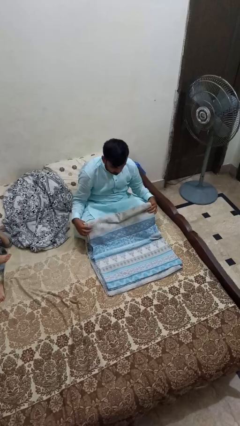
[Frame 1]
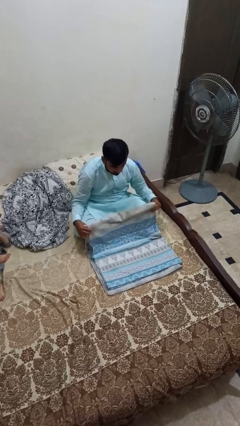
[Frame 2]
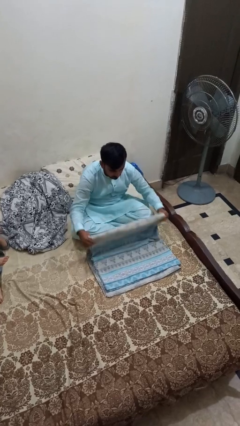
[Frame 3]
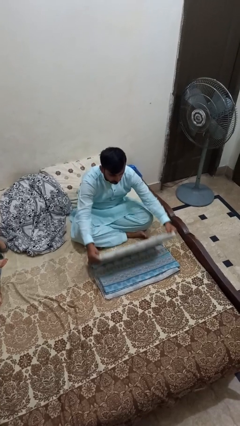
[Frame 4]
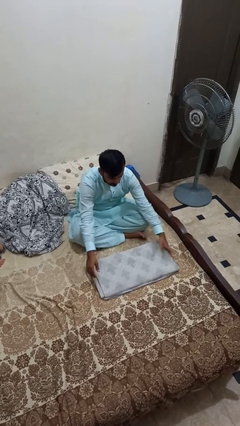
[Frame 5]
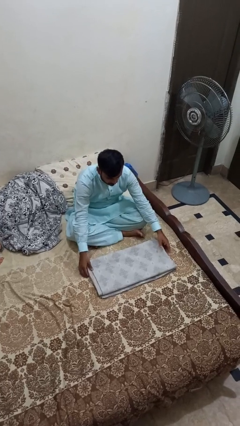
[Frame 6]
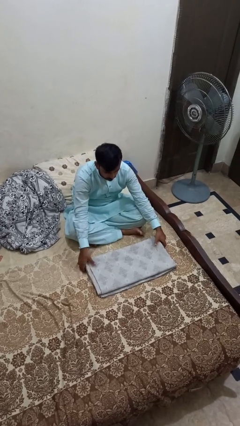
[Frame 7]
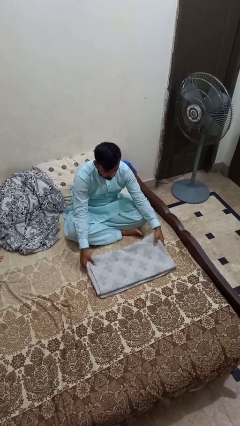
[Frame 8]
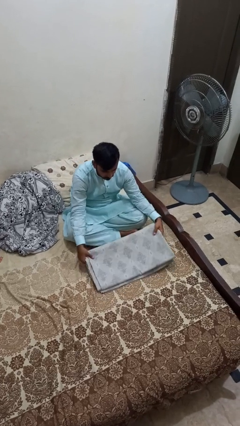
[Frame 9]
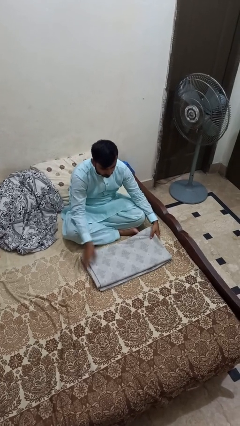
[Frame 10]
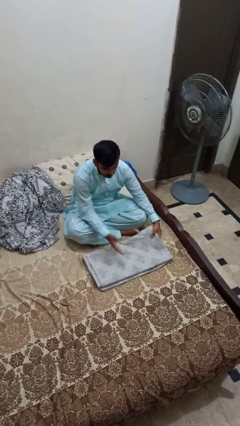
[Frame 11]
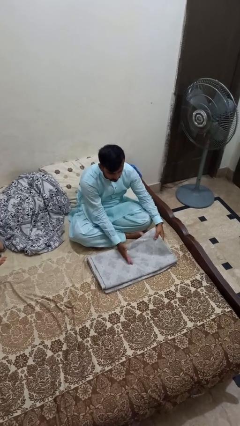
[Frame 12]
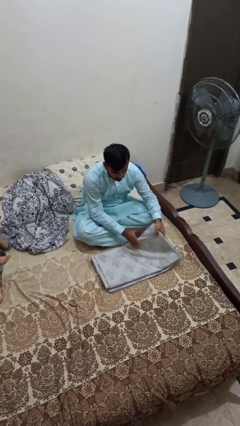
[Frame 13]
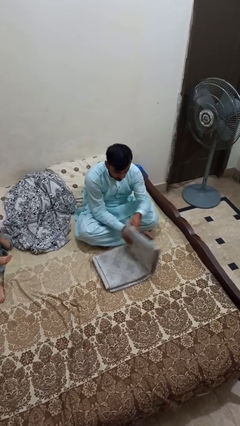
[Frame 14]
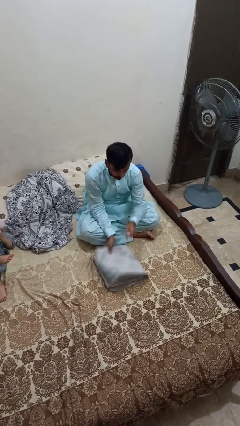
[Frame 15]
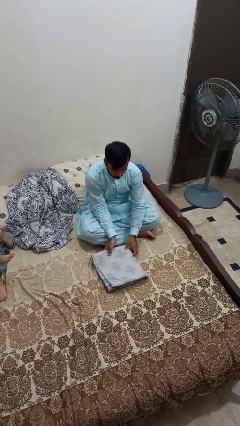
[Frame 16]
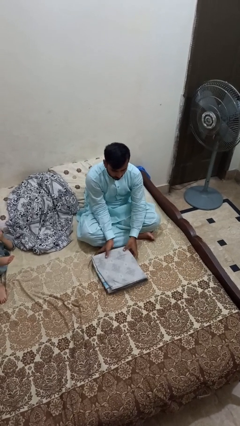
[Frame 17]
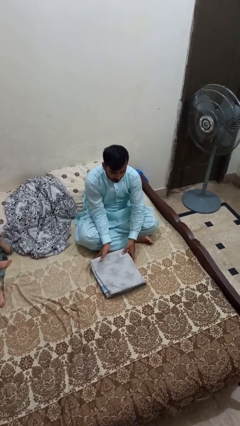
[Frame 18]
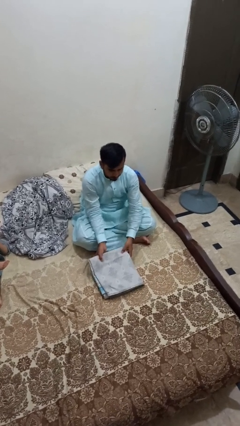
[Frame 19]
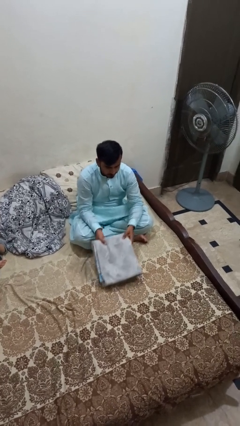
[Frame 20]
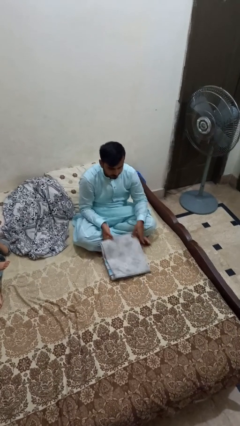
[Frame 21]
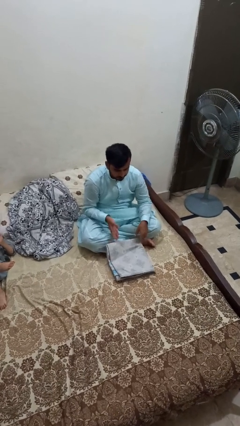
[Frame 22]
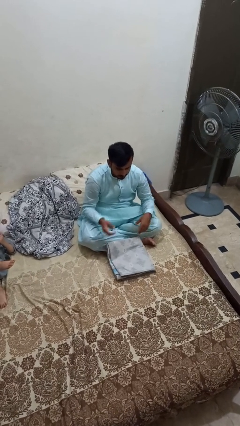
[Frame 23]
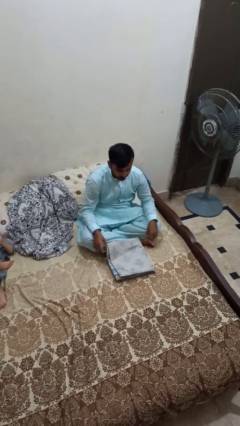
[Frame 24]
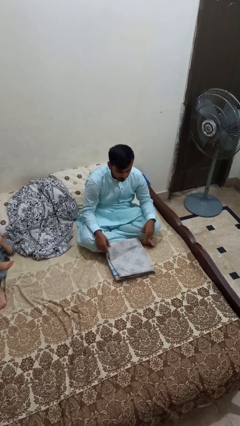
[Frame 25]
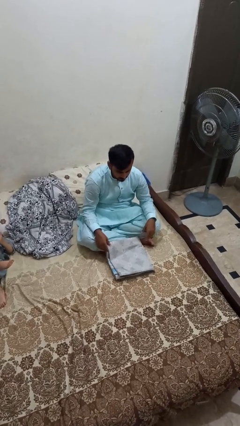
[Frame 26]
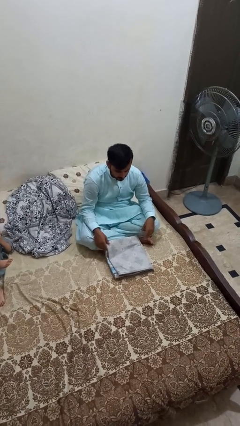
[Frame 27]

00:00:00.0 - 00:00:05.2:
person folds blanket

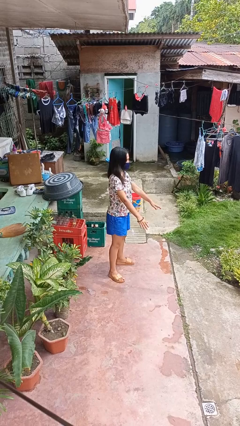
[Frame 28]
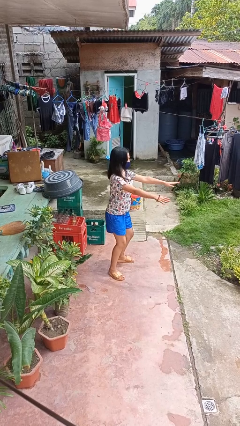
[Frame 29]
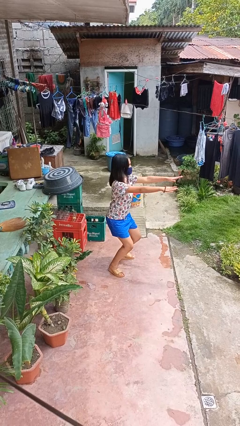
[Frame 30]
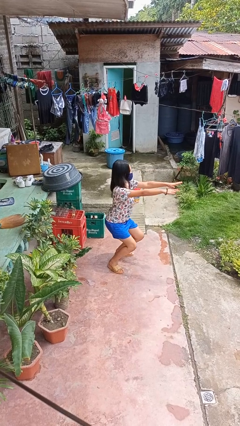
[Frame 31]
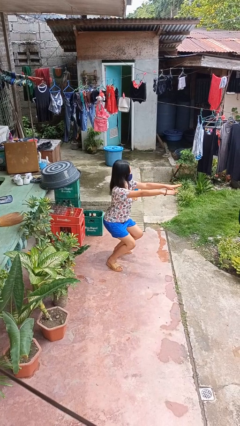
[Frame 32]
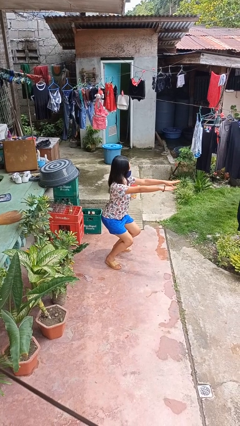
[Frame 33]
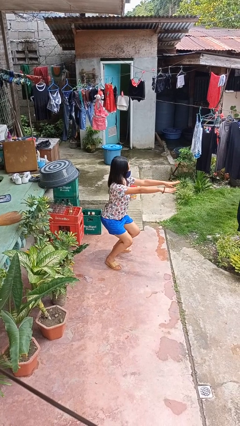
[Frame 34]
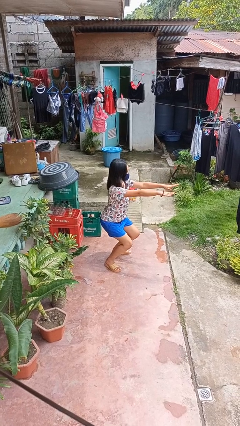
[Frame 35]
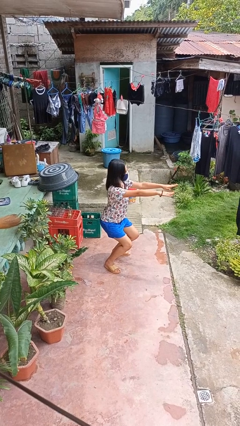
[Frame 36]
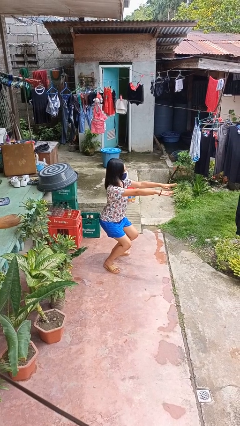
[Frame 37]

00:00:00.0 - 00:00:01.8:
person squats

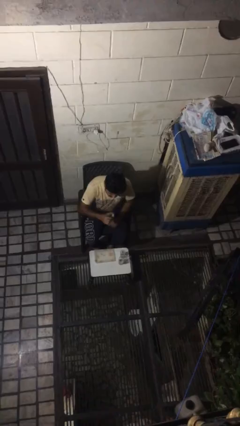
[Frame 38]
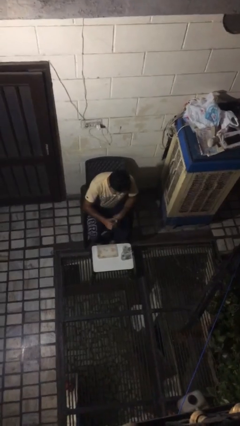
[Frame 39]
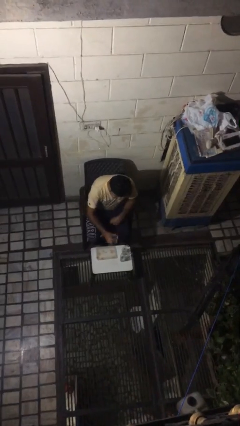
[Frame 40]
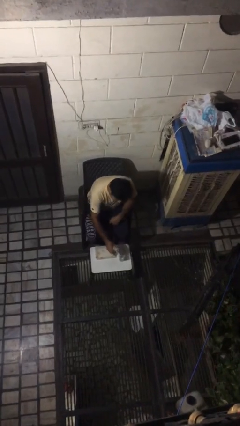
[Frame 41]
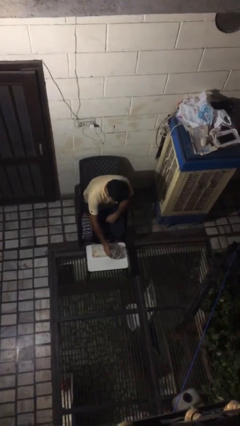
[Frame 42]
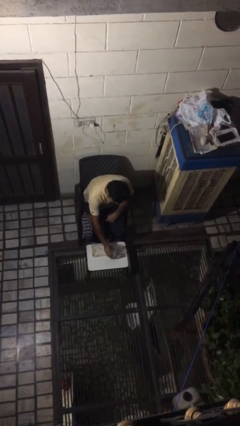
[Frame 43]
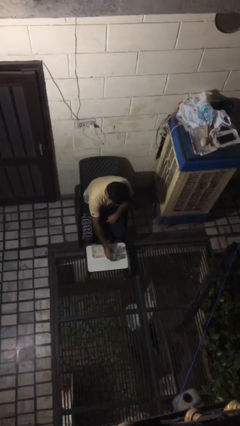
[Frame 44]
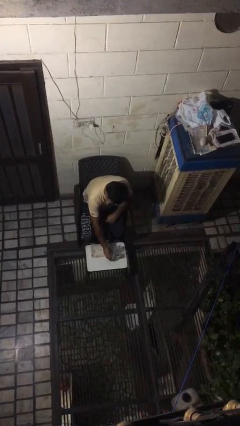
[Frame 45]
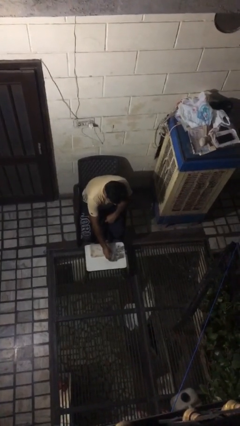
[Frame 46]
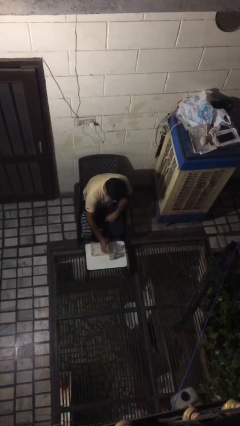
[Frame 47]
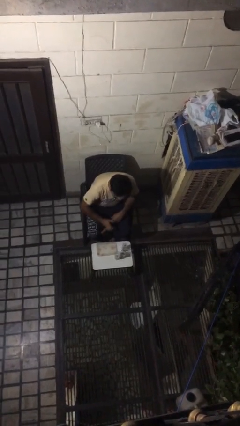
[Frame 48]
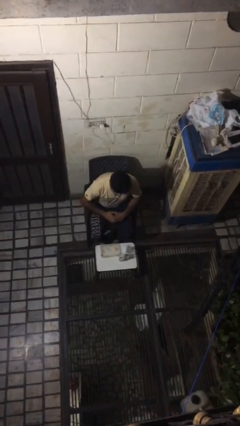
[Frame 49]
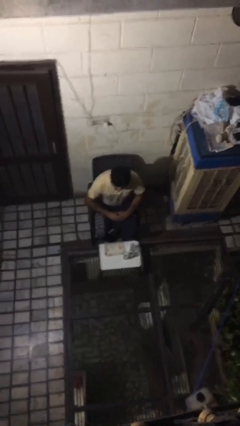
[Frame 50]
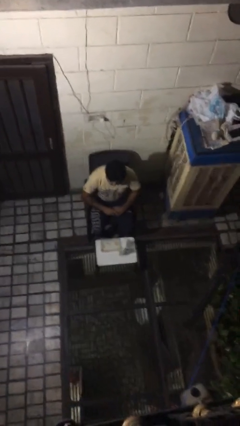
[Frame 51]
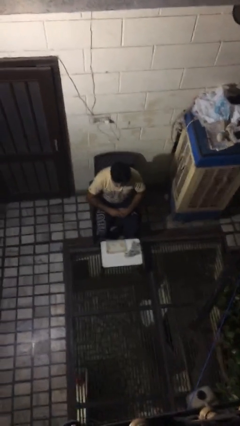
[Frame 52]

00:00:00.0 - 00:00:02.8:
person puts down object on table

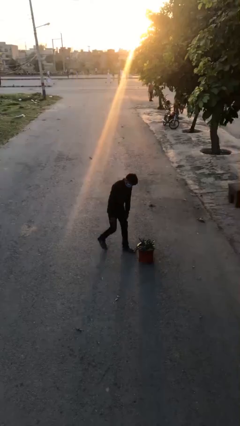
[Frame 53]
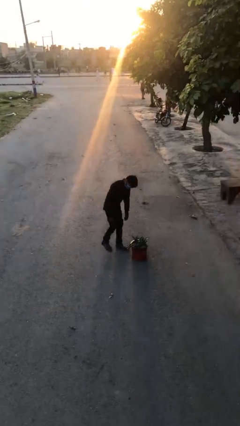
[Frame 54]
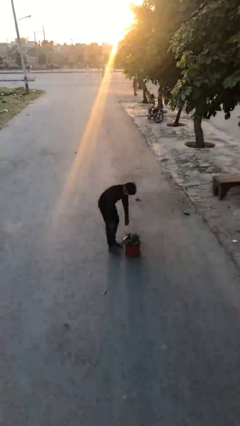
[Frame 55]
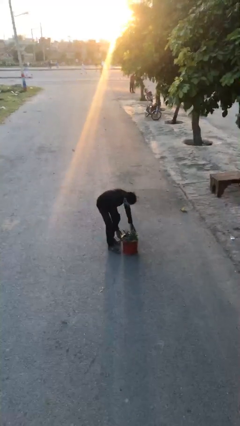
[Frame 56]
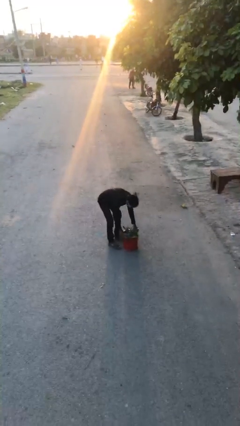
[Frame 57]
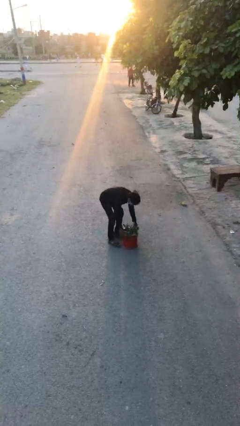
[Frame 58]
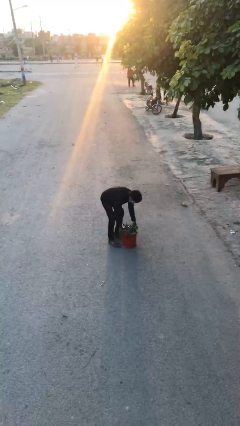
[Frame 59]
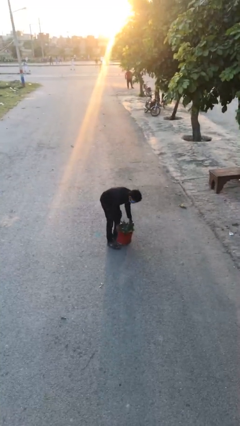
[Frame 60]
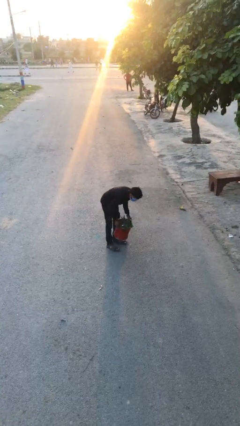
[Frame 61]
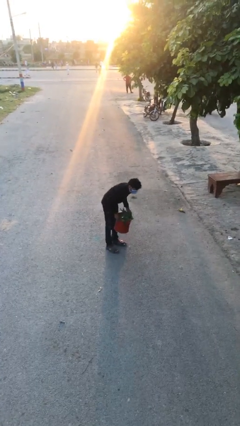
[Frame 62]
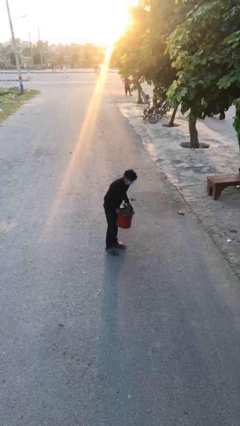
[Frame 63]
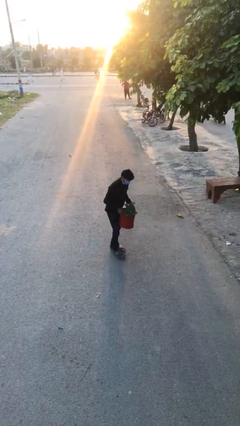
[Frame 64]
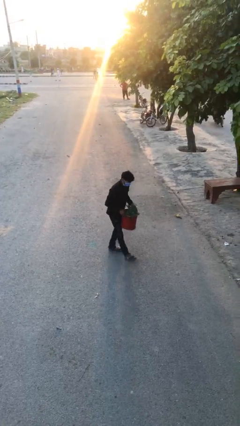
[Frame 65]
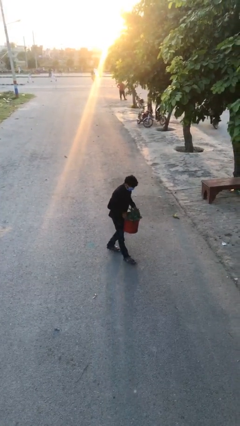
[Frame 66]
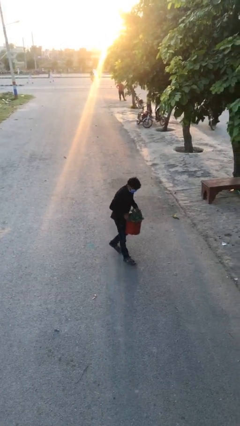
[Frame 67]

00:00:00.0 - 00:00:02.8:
person picks up object from floor

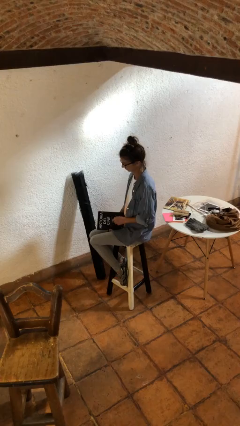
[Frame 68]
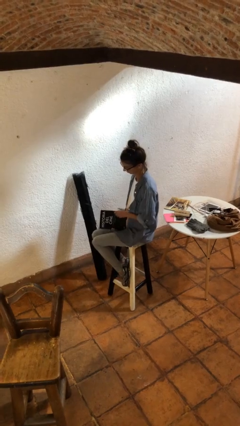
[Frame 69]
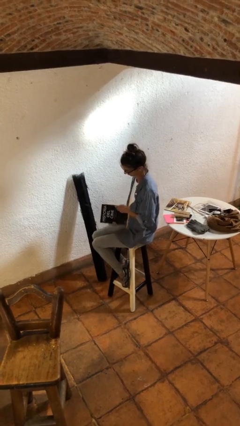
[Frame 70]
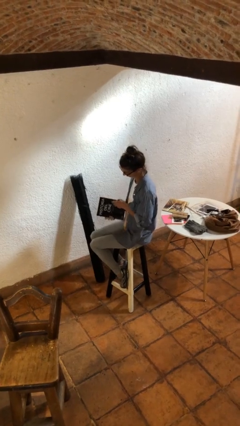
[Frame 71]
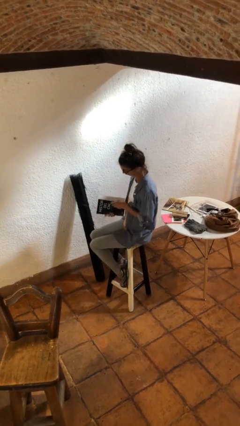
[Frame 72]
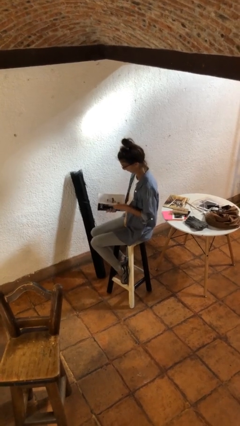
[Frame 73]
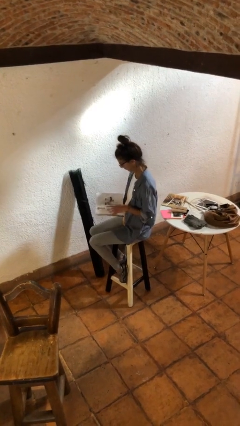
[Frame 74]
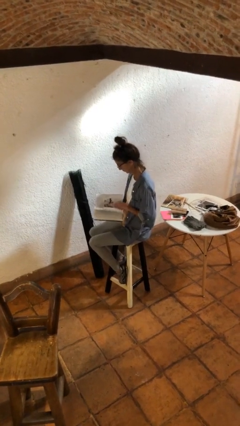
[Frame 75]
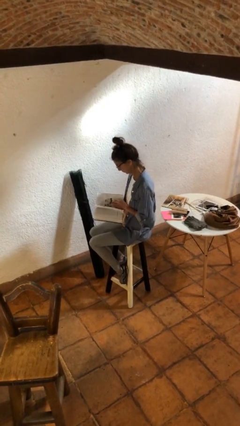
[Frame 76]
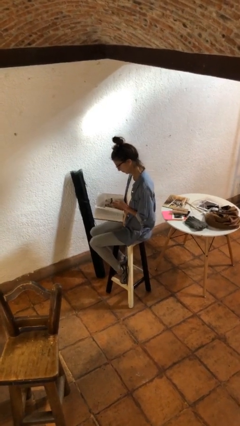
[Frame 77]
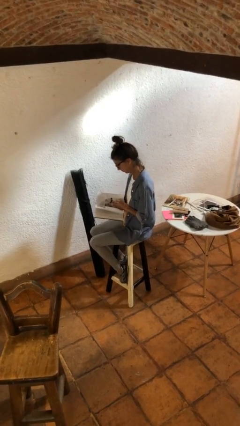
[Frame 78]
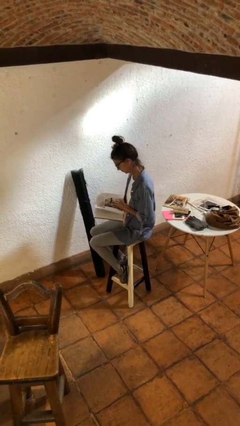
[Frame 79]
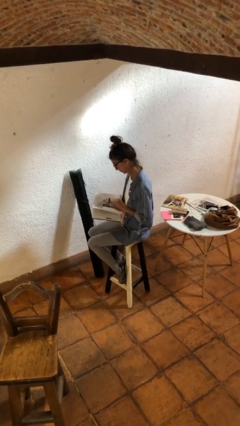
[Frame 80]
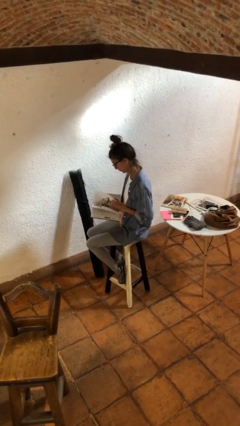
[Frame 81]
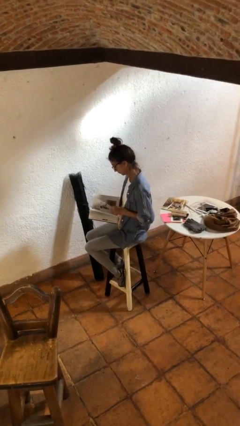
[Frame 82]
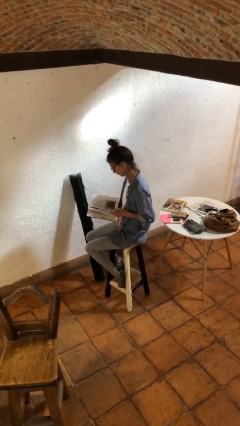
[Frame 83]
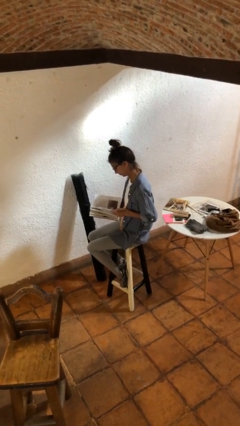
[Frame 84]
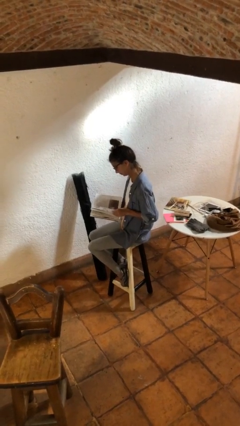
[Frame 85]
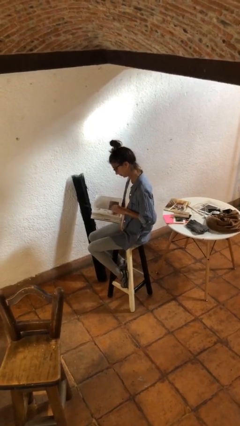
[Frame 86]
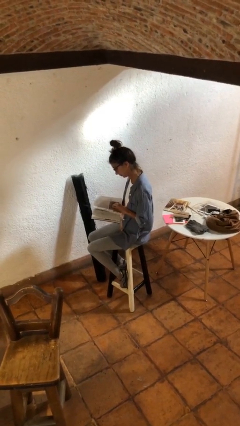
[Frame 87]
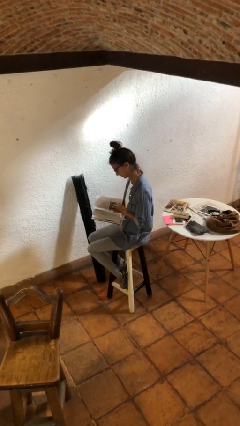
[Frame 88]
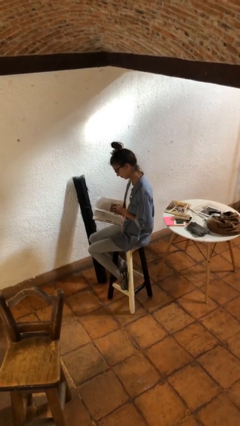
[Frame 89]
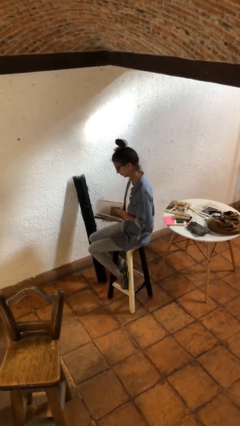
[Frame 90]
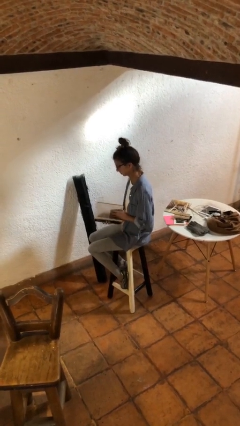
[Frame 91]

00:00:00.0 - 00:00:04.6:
person reads book

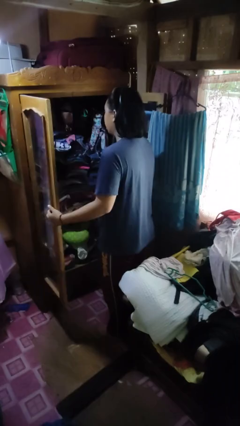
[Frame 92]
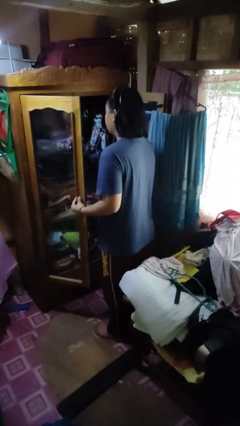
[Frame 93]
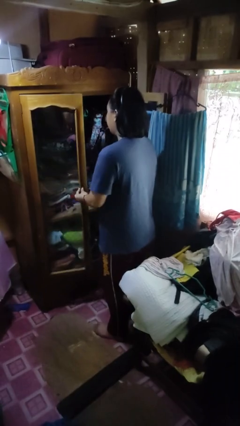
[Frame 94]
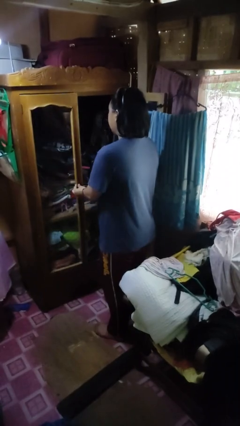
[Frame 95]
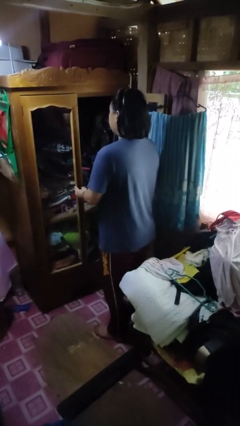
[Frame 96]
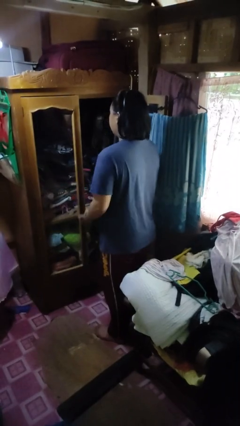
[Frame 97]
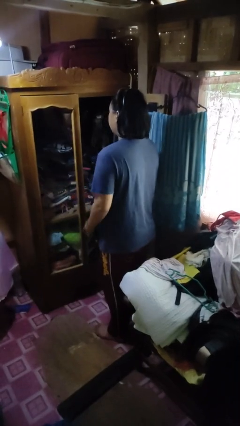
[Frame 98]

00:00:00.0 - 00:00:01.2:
person closes closet door
